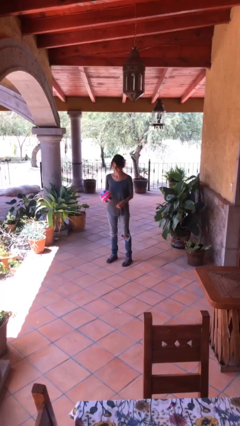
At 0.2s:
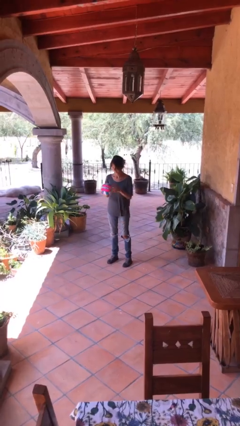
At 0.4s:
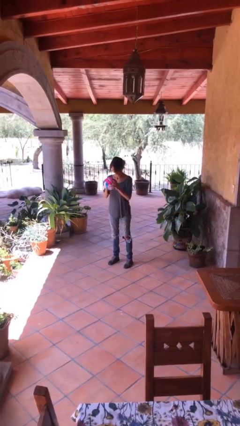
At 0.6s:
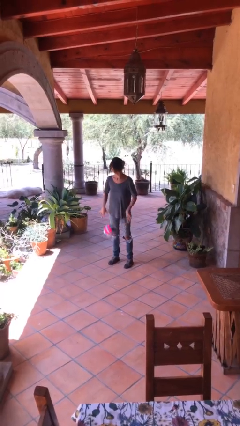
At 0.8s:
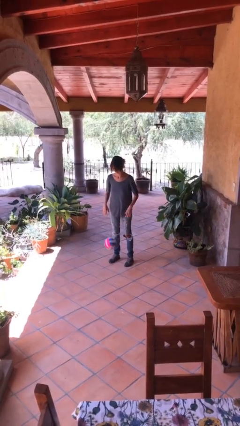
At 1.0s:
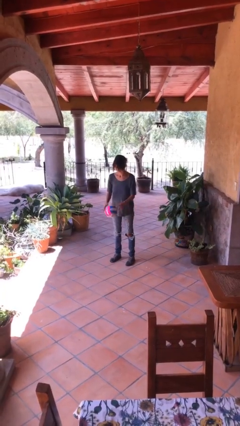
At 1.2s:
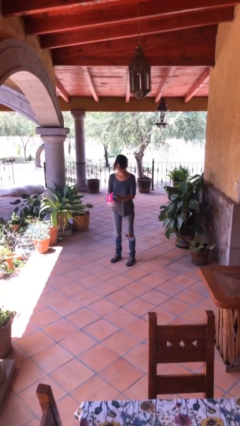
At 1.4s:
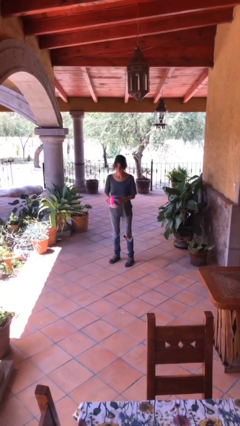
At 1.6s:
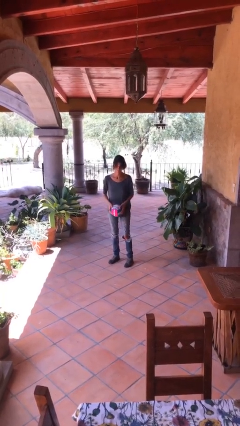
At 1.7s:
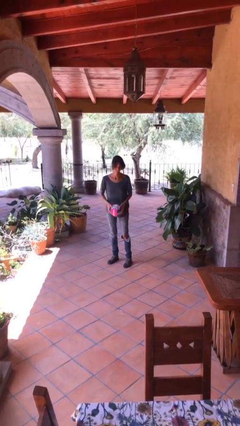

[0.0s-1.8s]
person bounces ball on floor

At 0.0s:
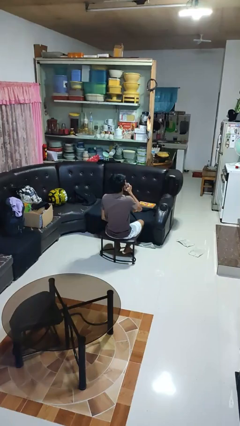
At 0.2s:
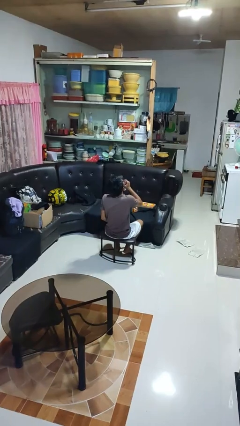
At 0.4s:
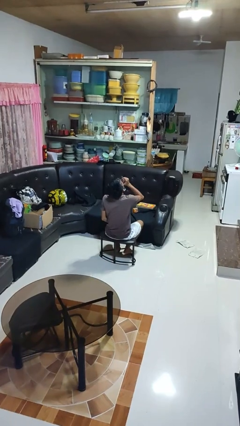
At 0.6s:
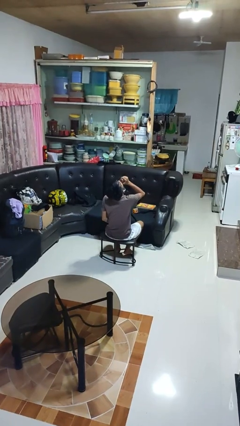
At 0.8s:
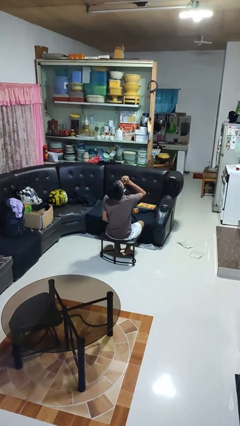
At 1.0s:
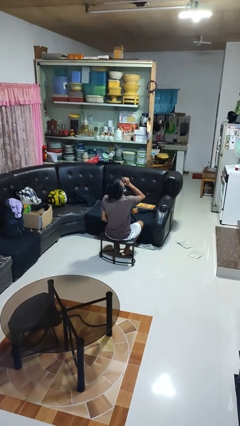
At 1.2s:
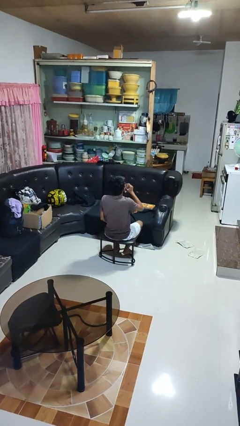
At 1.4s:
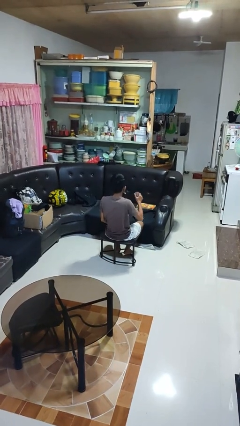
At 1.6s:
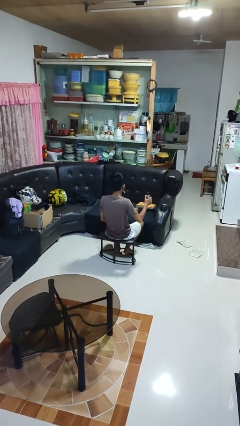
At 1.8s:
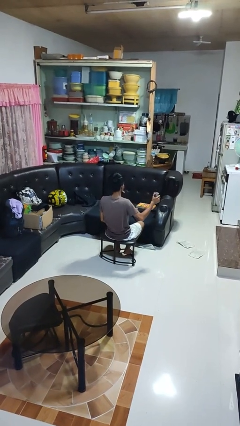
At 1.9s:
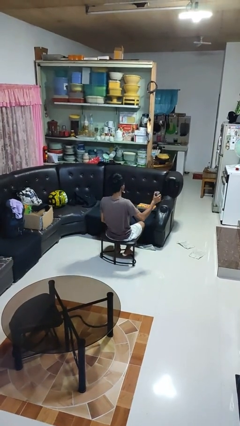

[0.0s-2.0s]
person drinks from beverage can

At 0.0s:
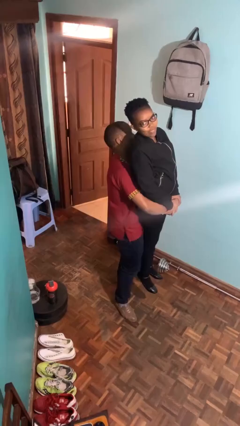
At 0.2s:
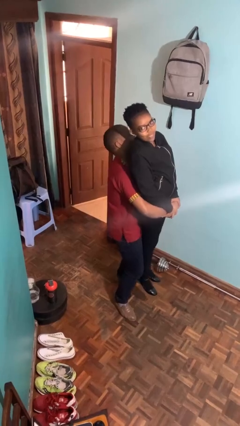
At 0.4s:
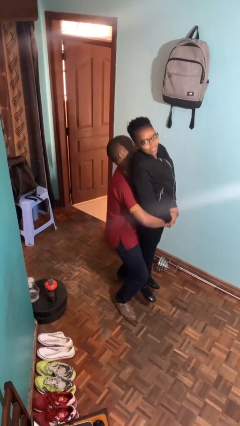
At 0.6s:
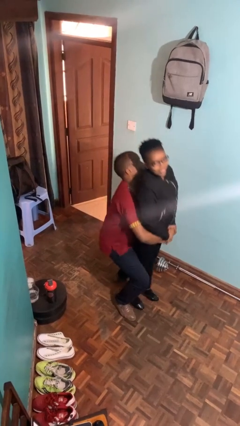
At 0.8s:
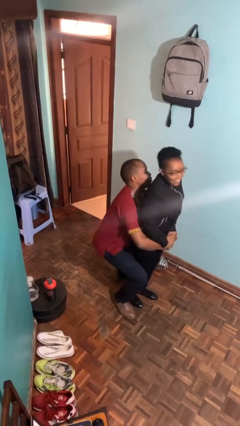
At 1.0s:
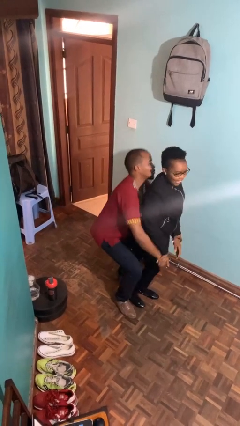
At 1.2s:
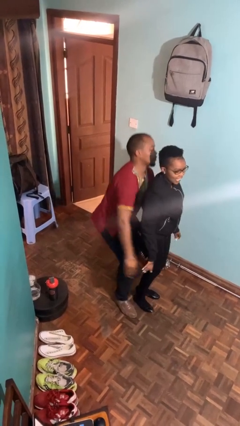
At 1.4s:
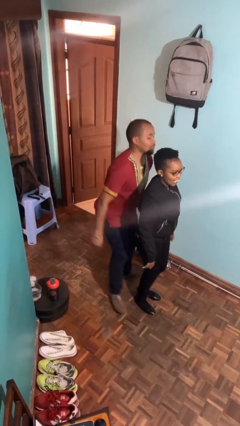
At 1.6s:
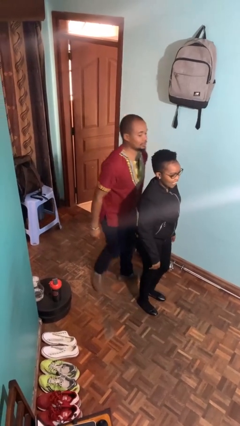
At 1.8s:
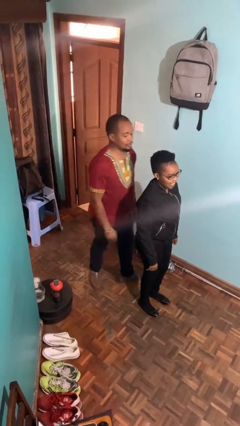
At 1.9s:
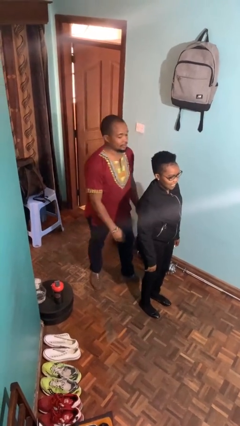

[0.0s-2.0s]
person puts down person

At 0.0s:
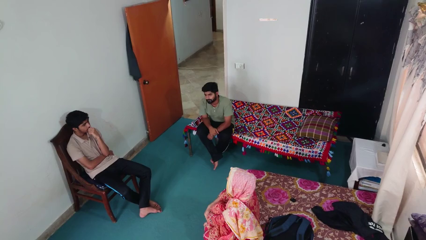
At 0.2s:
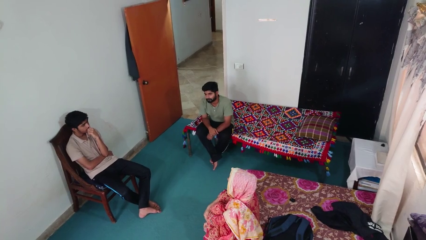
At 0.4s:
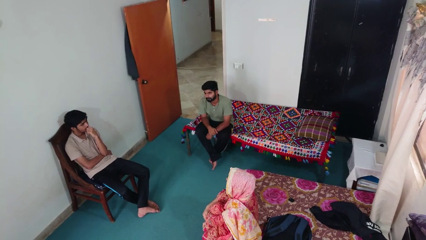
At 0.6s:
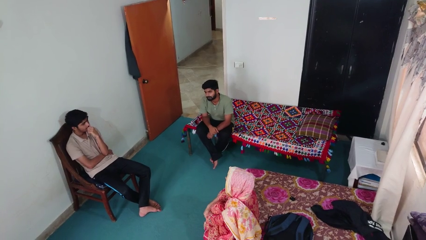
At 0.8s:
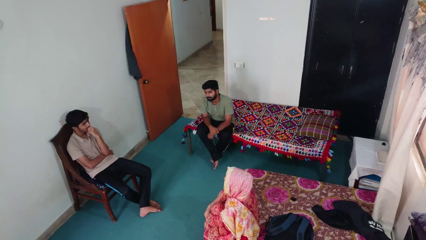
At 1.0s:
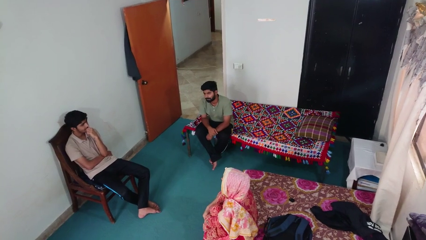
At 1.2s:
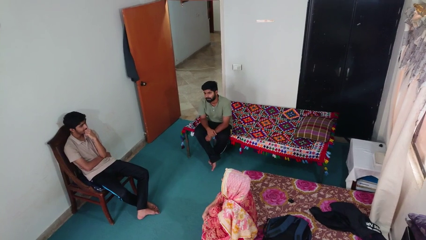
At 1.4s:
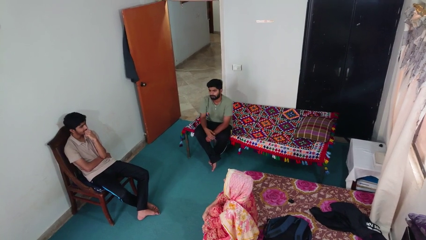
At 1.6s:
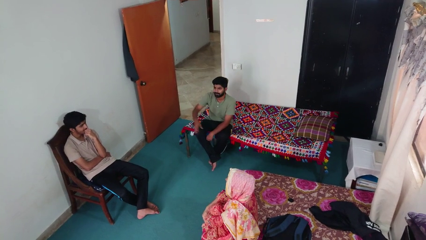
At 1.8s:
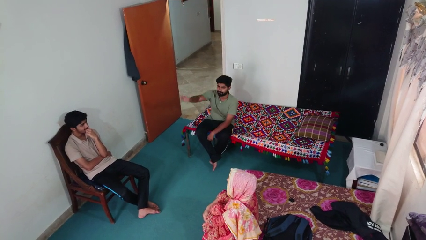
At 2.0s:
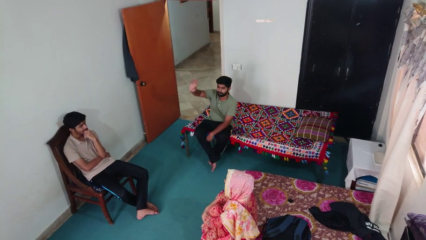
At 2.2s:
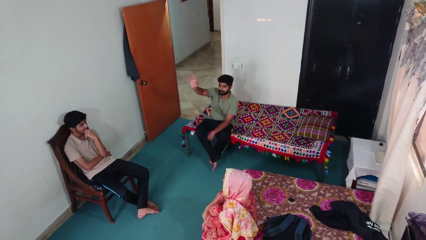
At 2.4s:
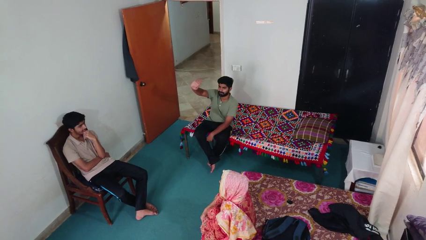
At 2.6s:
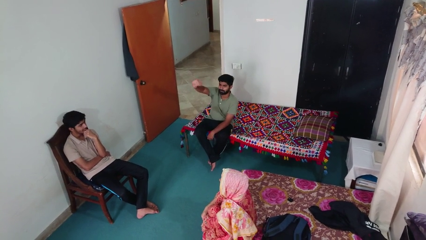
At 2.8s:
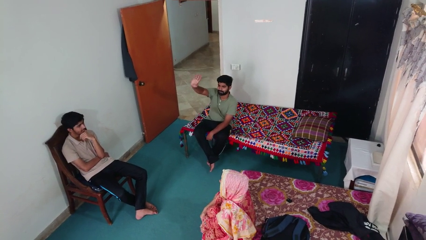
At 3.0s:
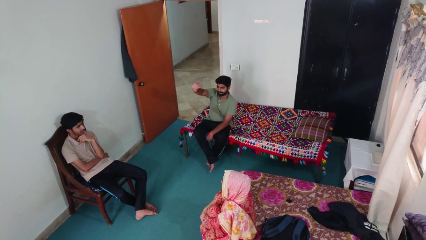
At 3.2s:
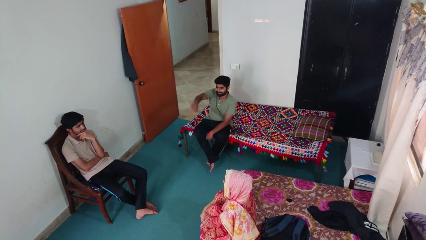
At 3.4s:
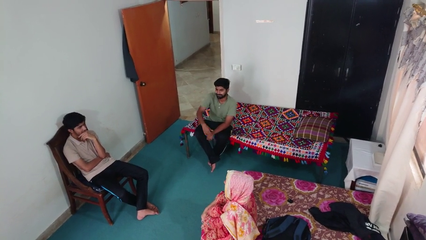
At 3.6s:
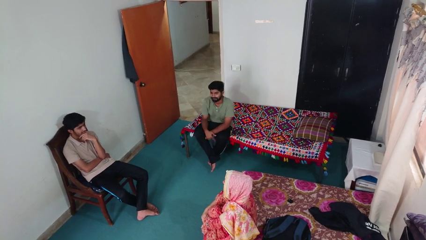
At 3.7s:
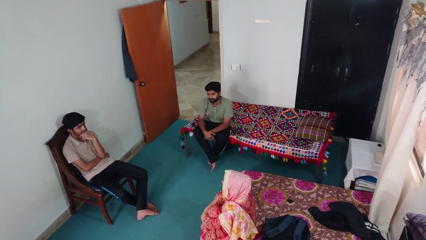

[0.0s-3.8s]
person waves at person

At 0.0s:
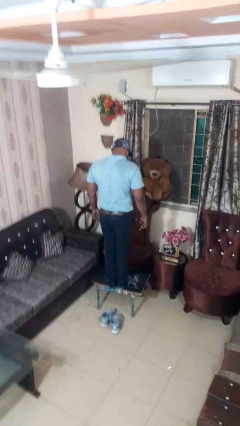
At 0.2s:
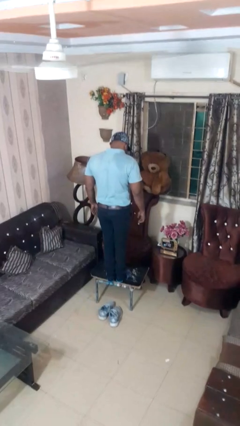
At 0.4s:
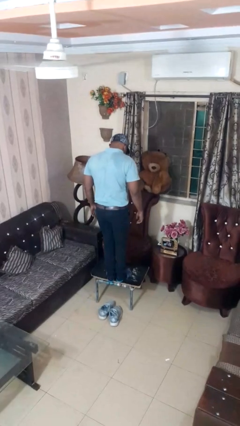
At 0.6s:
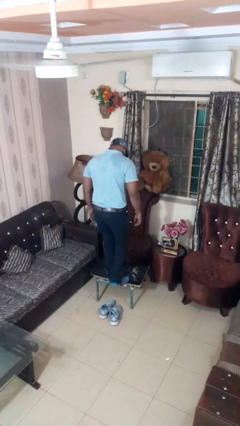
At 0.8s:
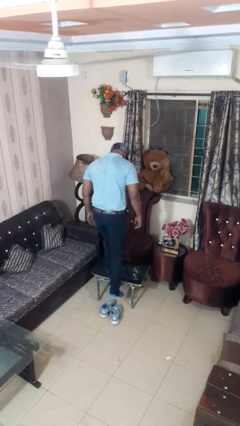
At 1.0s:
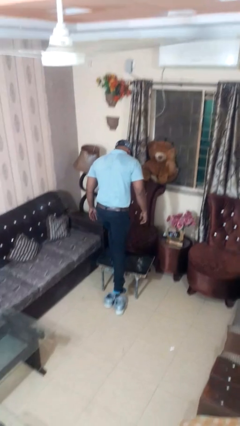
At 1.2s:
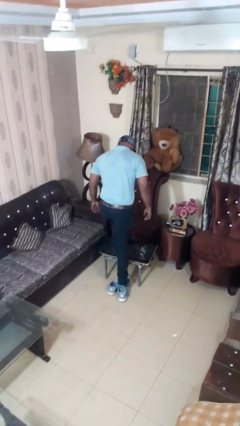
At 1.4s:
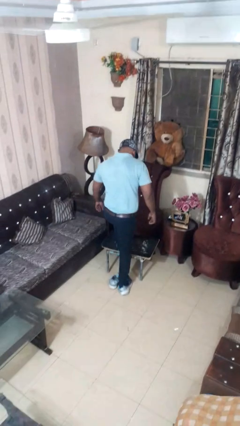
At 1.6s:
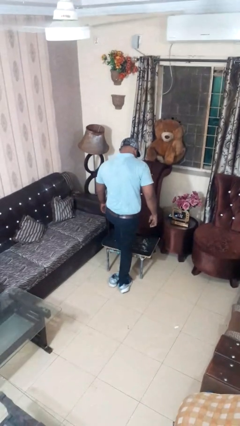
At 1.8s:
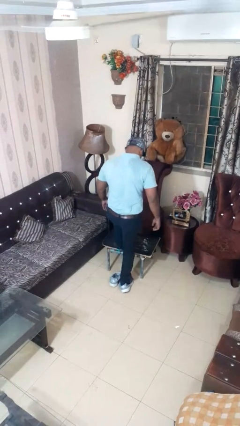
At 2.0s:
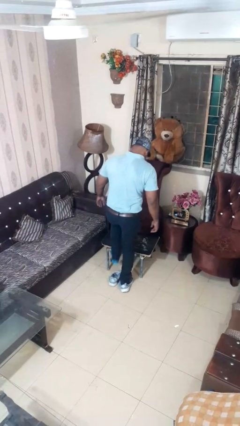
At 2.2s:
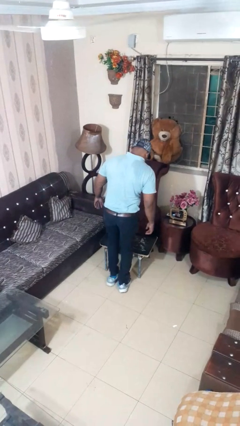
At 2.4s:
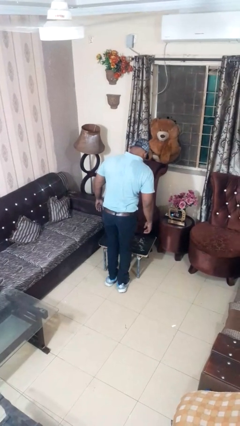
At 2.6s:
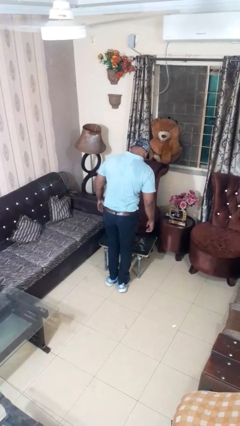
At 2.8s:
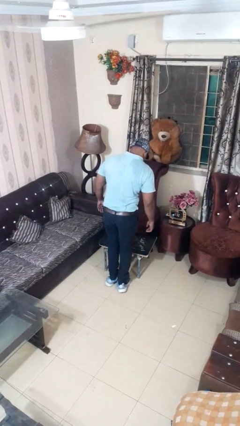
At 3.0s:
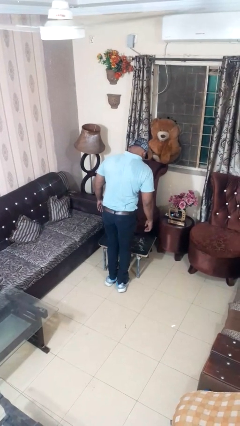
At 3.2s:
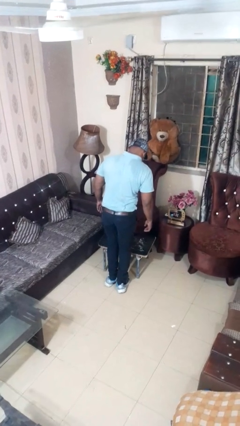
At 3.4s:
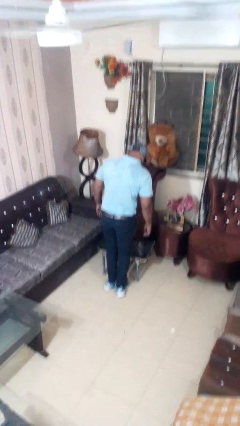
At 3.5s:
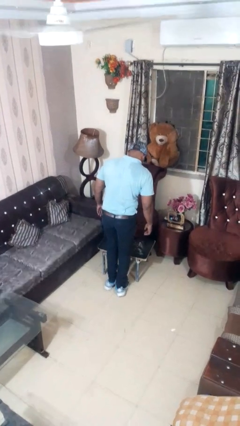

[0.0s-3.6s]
person climbs off table

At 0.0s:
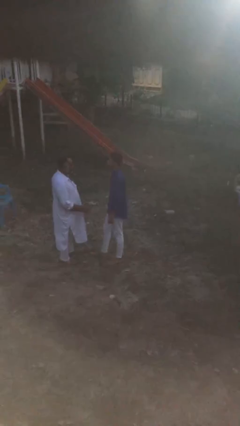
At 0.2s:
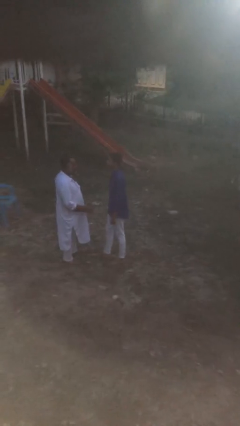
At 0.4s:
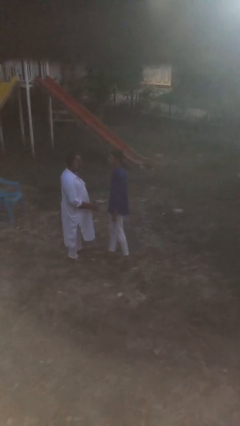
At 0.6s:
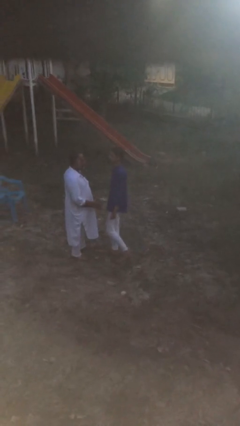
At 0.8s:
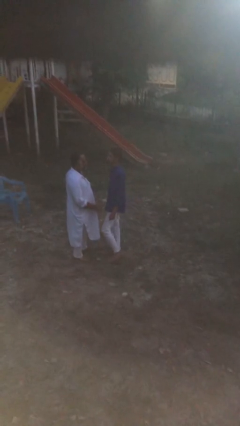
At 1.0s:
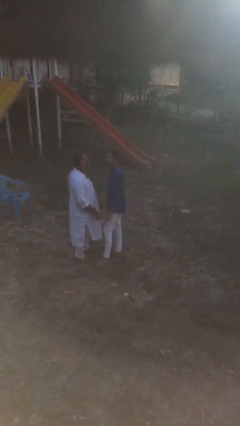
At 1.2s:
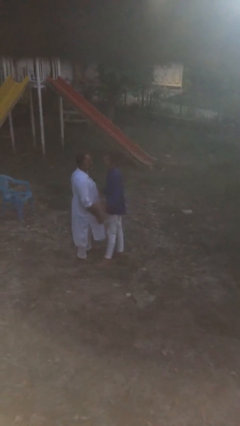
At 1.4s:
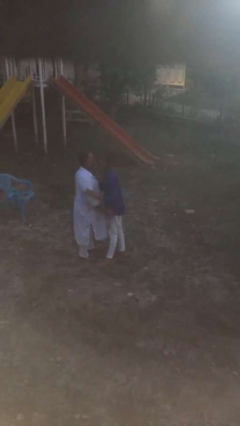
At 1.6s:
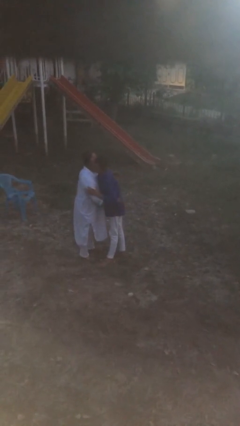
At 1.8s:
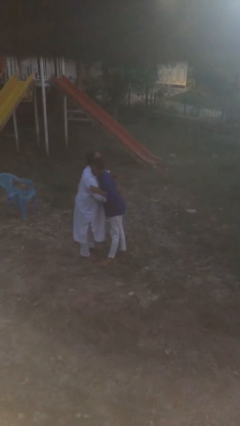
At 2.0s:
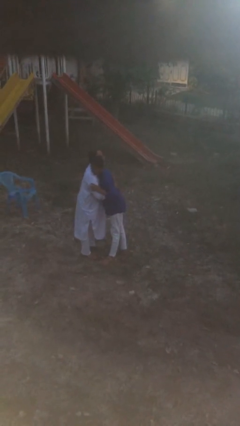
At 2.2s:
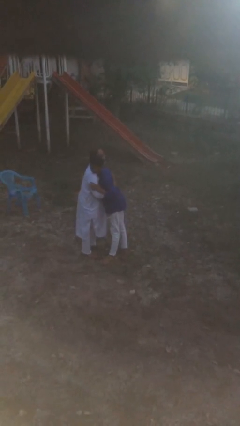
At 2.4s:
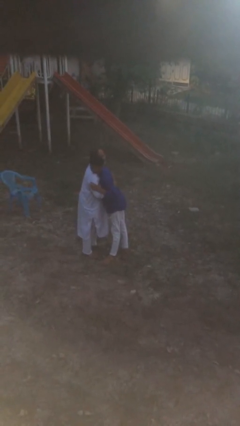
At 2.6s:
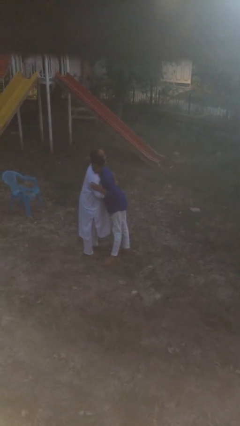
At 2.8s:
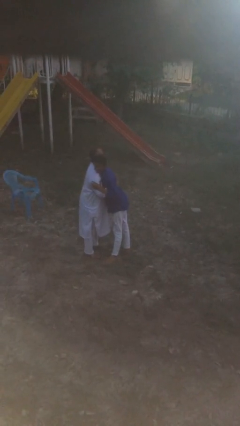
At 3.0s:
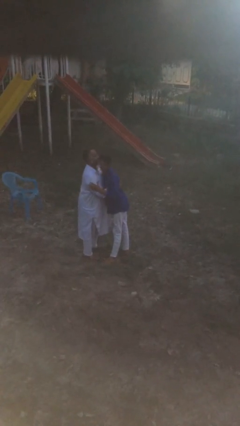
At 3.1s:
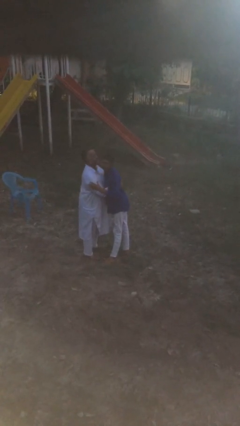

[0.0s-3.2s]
person embraces person

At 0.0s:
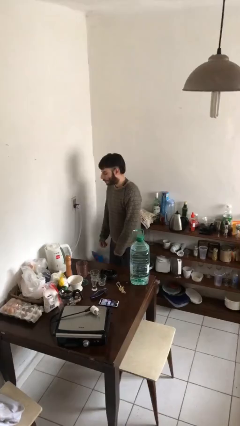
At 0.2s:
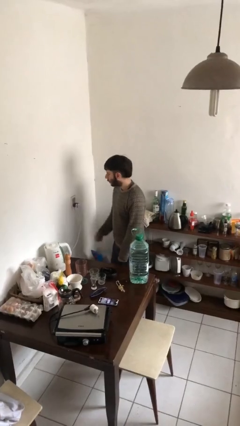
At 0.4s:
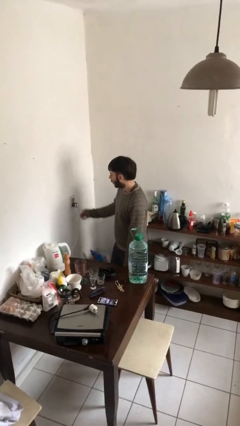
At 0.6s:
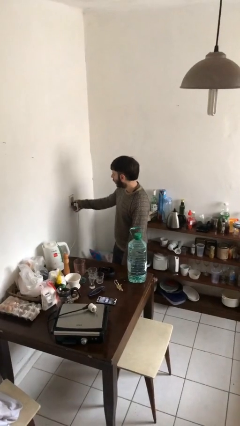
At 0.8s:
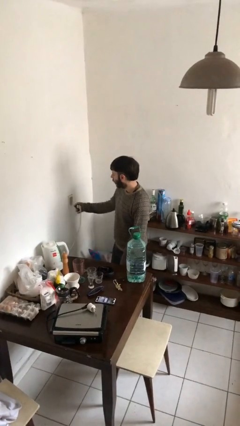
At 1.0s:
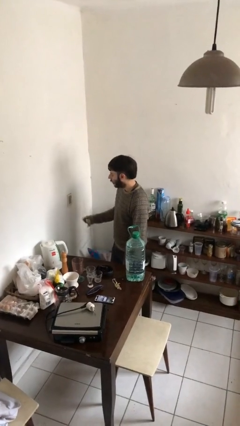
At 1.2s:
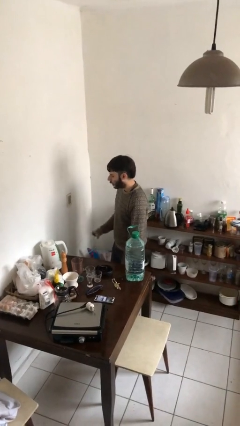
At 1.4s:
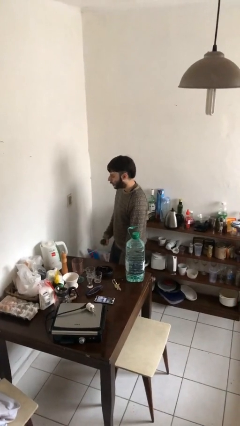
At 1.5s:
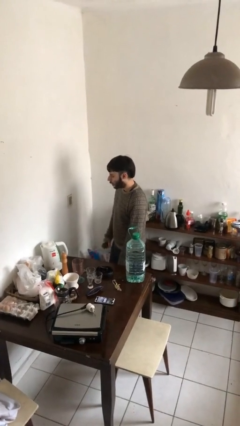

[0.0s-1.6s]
person unplugs from electrical socket
